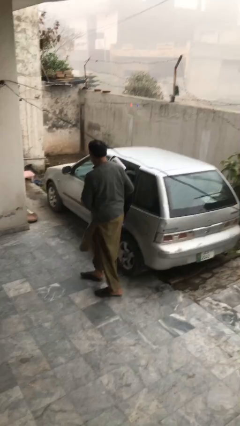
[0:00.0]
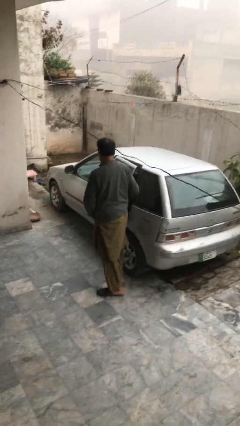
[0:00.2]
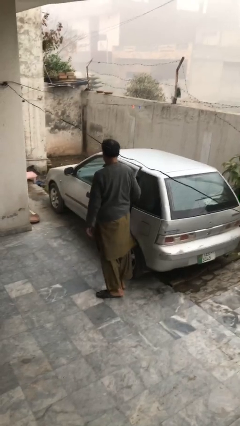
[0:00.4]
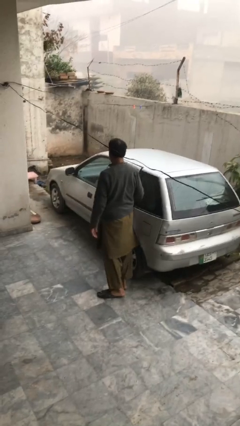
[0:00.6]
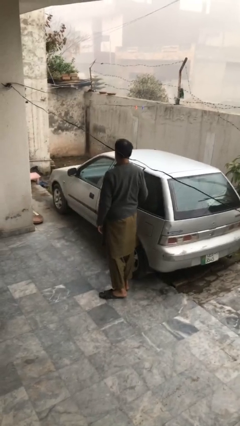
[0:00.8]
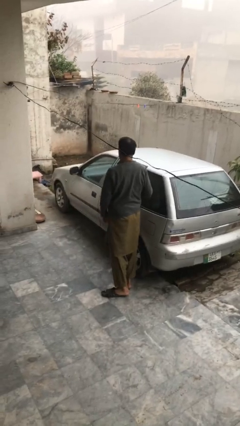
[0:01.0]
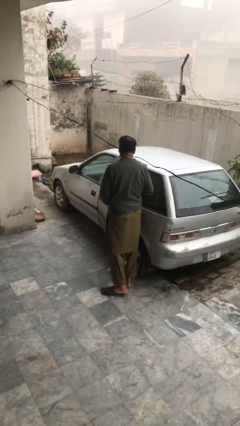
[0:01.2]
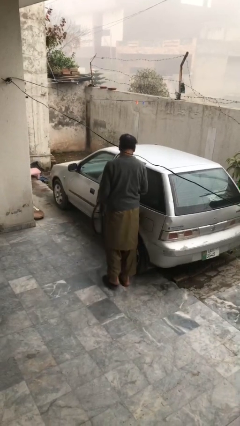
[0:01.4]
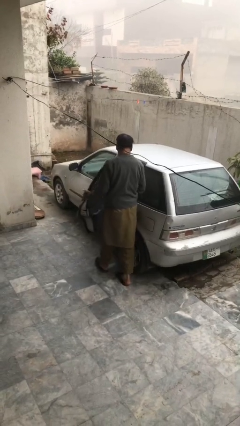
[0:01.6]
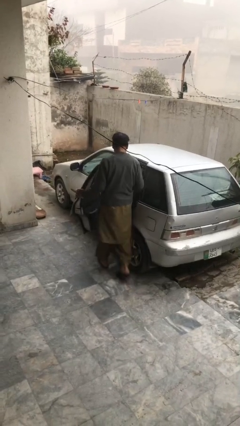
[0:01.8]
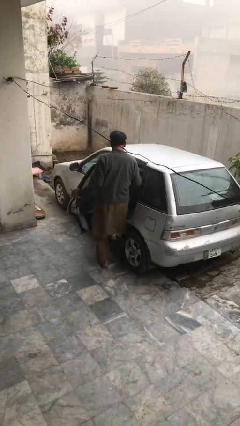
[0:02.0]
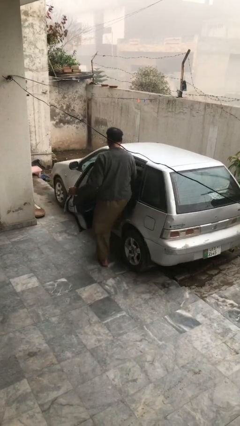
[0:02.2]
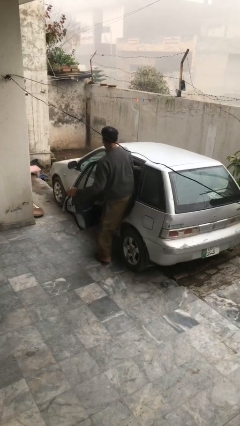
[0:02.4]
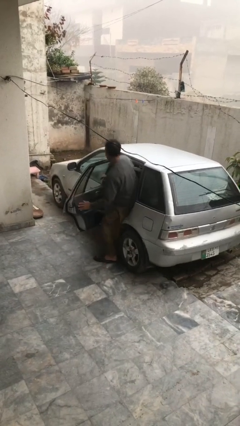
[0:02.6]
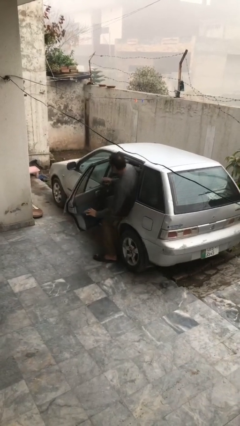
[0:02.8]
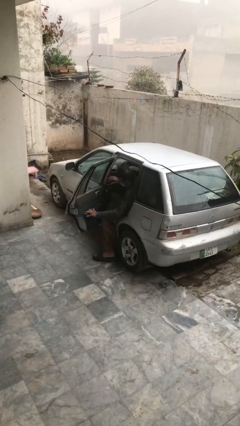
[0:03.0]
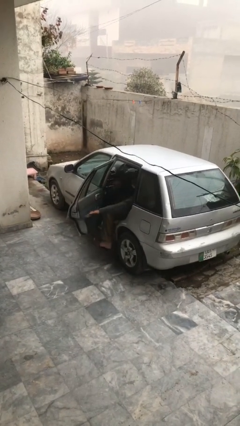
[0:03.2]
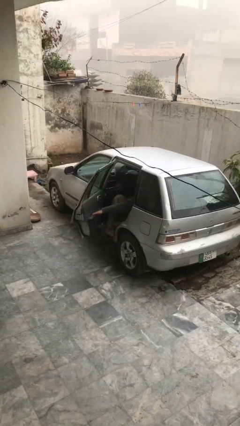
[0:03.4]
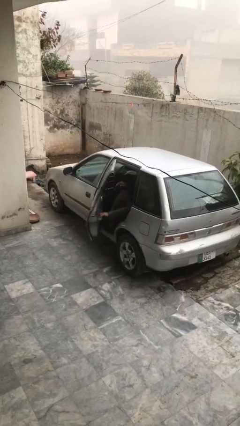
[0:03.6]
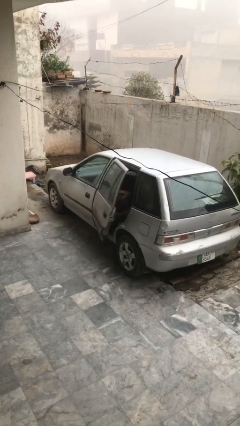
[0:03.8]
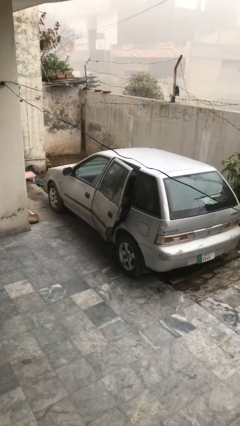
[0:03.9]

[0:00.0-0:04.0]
car picks up person

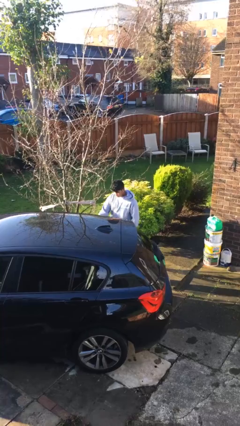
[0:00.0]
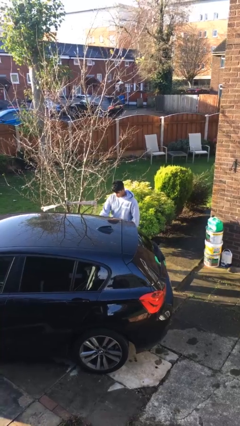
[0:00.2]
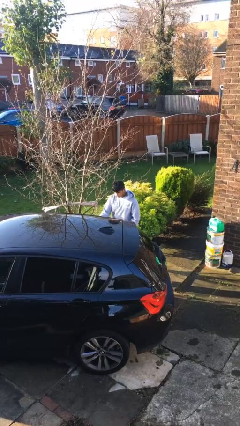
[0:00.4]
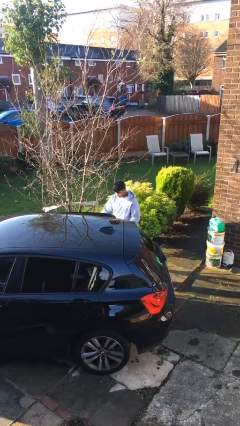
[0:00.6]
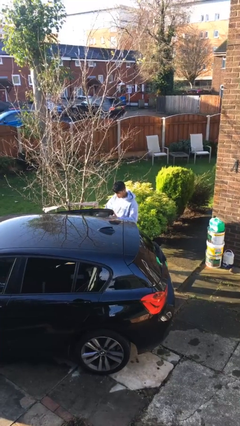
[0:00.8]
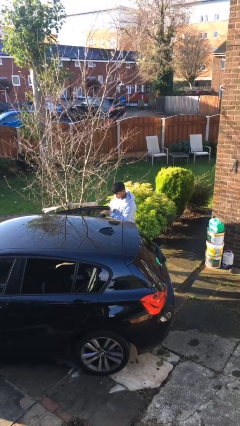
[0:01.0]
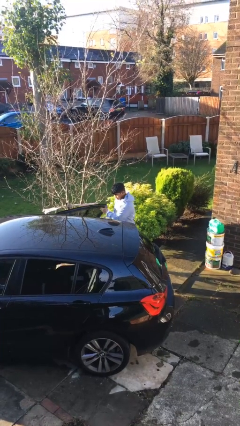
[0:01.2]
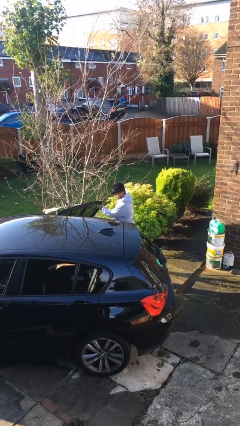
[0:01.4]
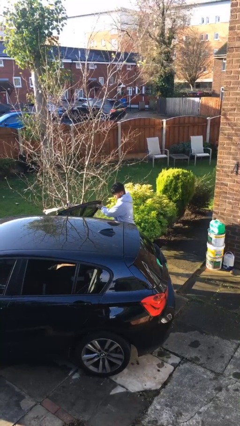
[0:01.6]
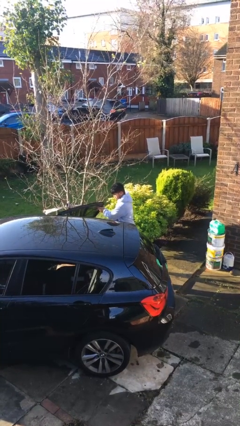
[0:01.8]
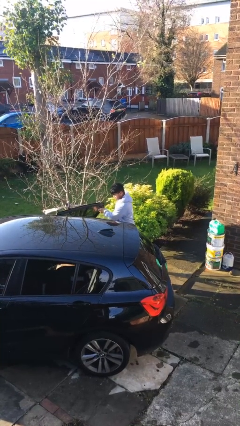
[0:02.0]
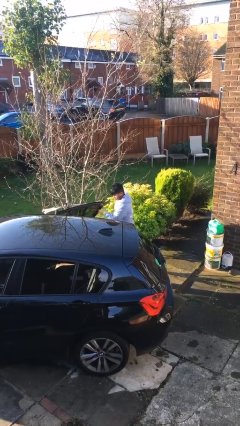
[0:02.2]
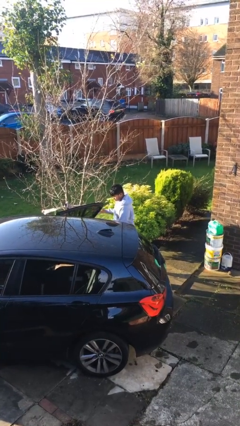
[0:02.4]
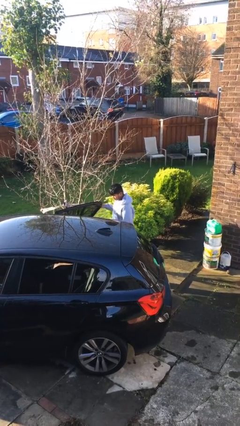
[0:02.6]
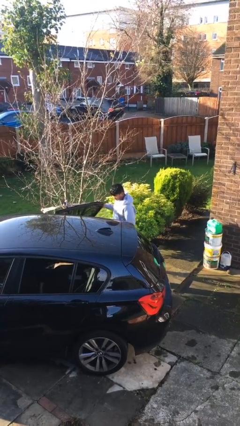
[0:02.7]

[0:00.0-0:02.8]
person opens car door

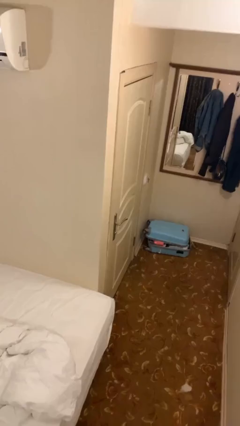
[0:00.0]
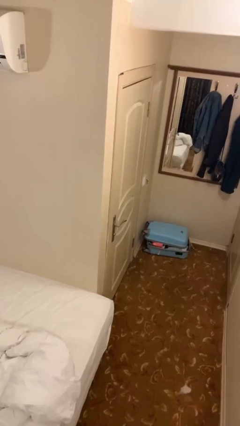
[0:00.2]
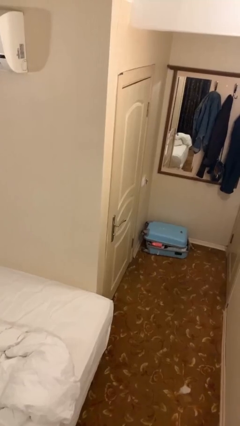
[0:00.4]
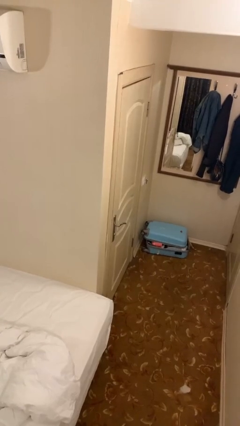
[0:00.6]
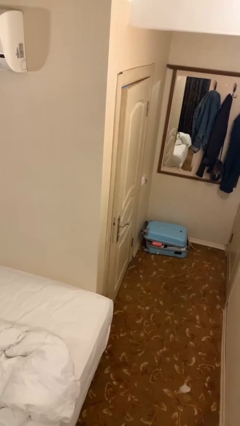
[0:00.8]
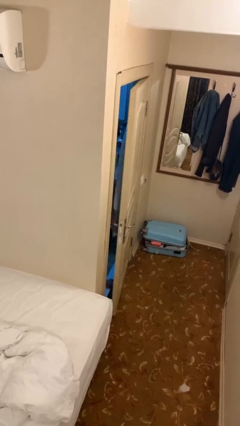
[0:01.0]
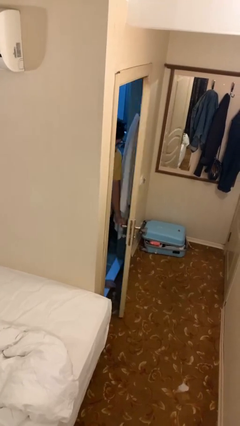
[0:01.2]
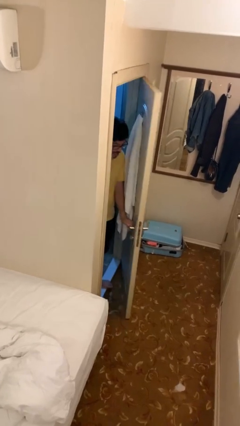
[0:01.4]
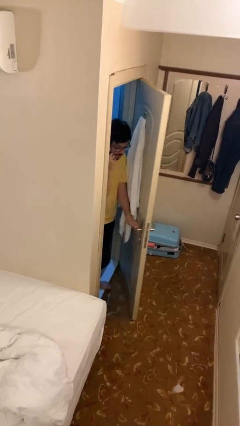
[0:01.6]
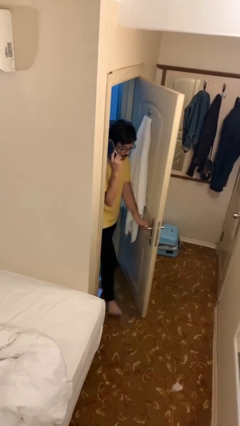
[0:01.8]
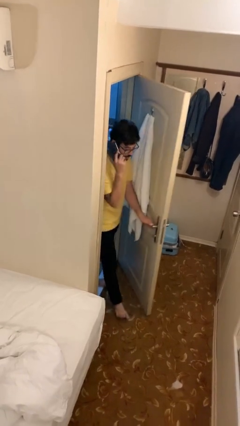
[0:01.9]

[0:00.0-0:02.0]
person opens facility door

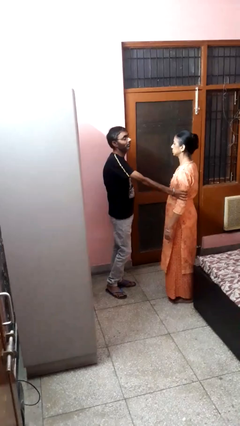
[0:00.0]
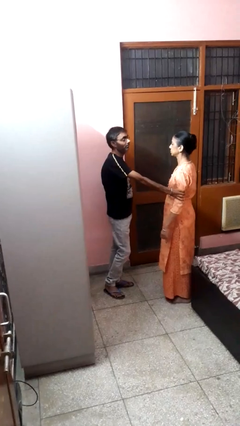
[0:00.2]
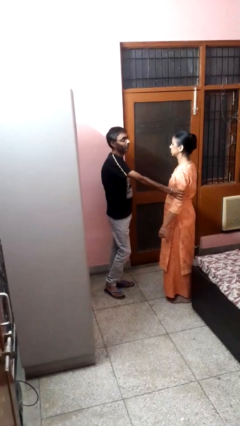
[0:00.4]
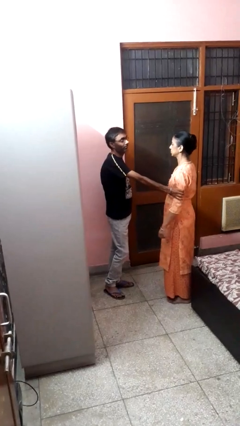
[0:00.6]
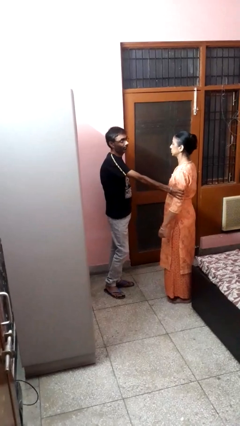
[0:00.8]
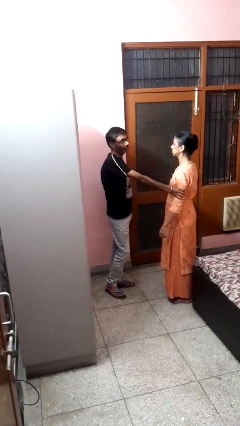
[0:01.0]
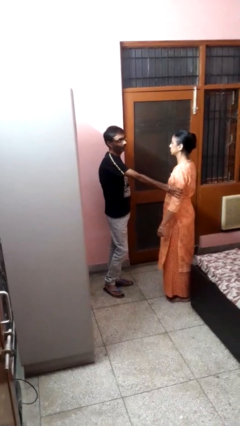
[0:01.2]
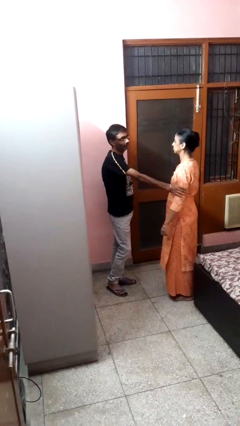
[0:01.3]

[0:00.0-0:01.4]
person grabs person by bicep

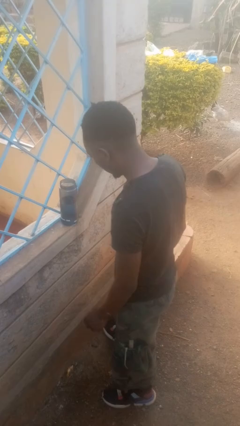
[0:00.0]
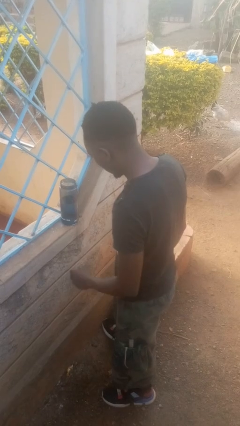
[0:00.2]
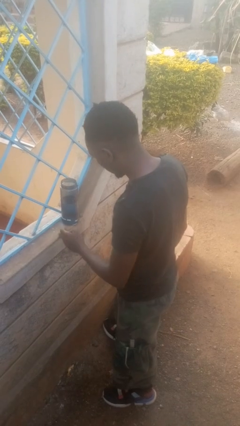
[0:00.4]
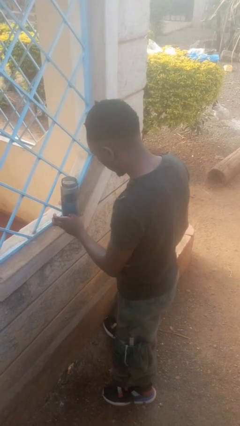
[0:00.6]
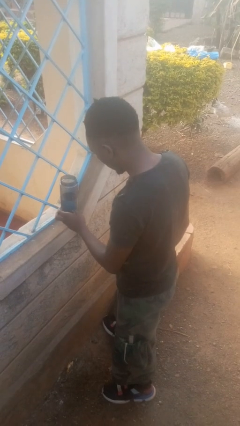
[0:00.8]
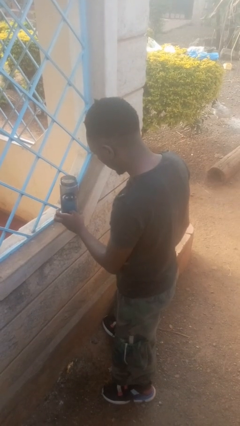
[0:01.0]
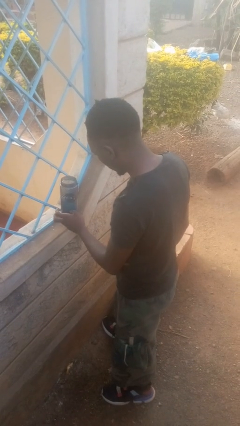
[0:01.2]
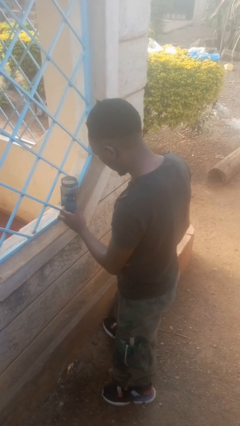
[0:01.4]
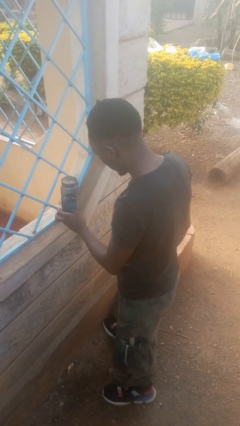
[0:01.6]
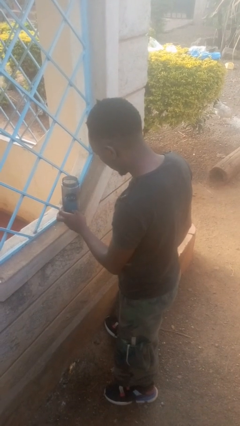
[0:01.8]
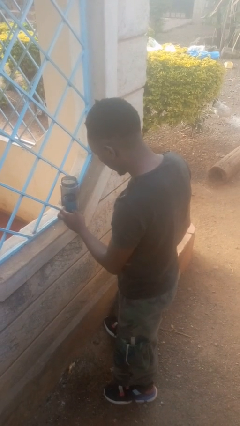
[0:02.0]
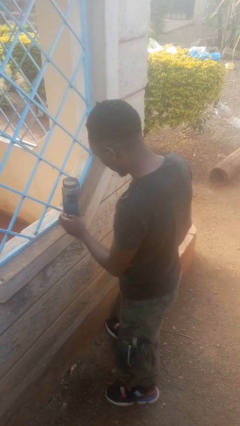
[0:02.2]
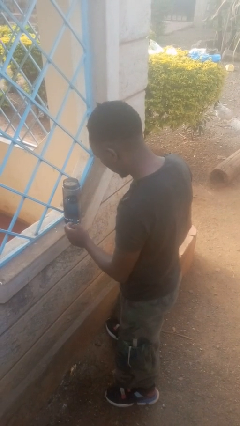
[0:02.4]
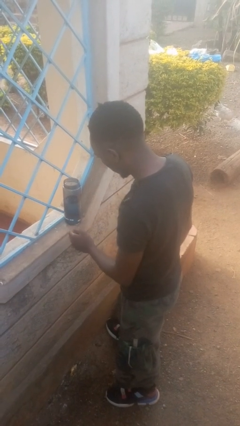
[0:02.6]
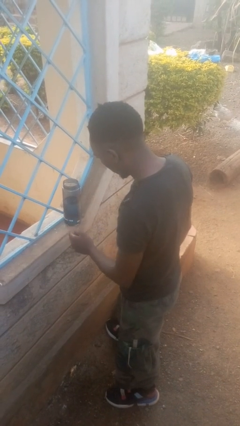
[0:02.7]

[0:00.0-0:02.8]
person taps object with finger

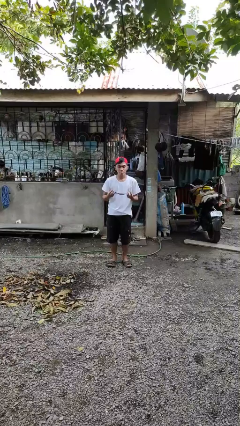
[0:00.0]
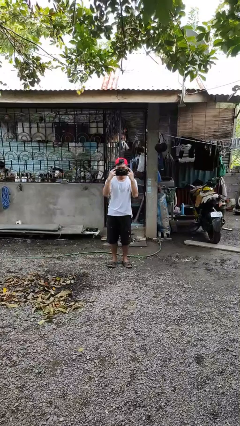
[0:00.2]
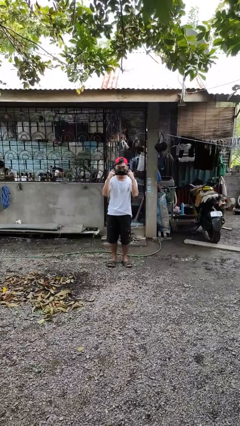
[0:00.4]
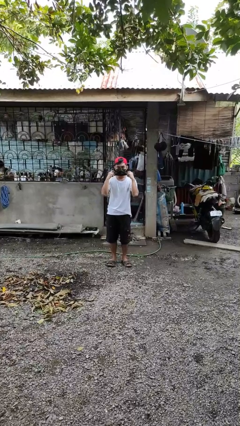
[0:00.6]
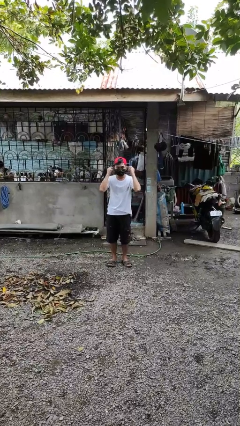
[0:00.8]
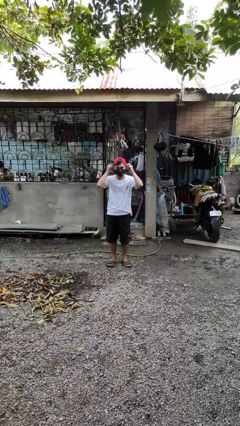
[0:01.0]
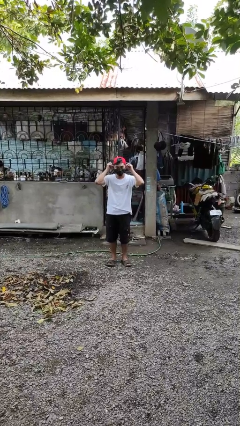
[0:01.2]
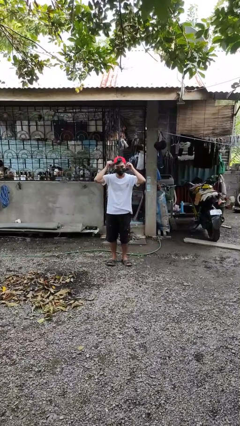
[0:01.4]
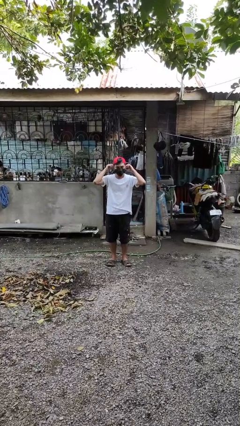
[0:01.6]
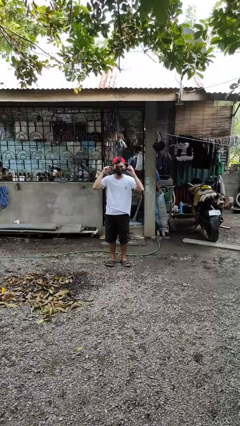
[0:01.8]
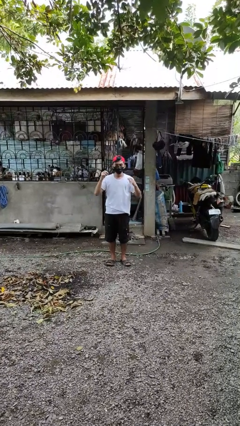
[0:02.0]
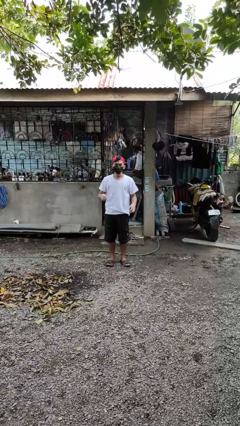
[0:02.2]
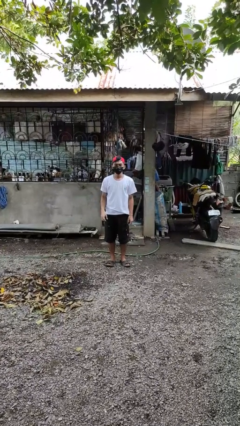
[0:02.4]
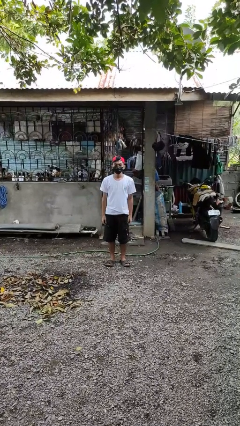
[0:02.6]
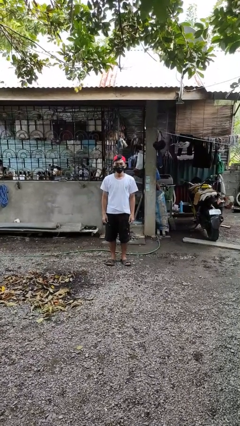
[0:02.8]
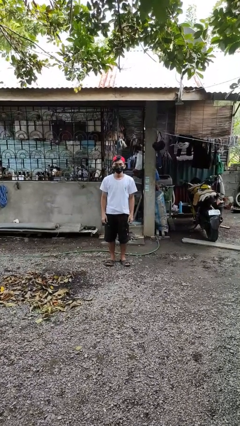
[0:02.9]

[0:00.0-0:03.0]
person puts on facemask

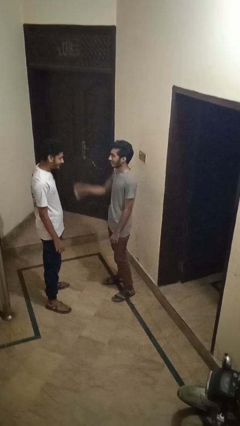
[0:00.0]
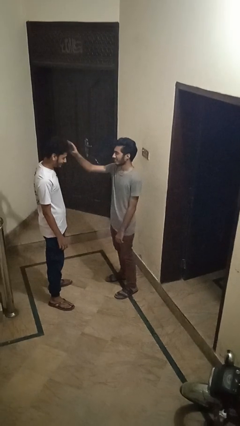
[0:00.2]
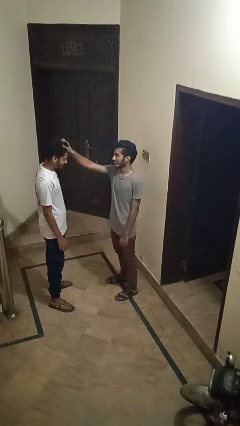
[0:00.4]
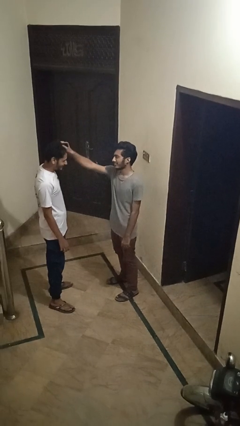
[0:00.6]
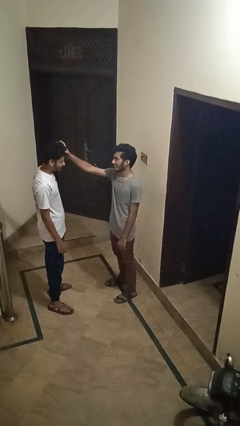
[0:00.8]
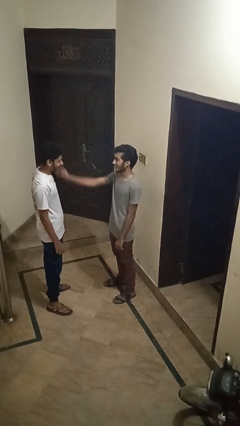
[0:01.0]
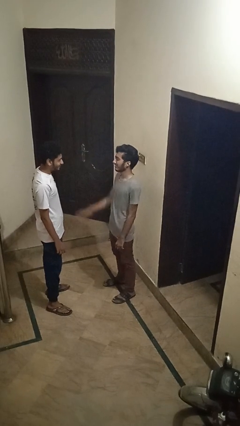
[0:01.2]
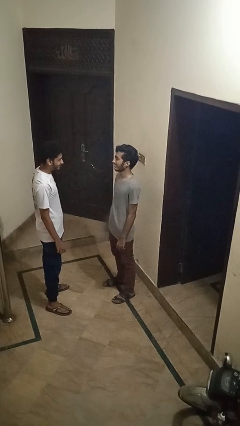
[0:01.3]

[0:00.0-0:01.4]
person grabs person by hair
